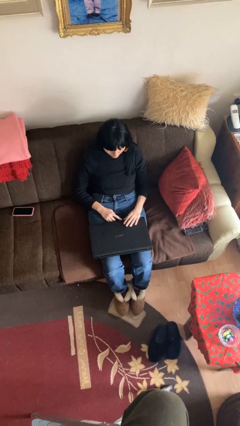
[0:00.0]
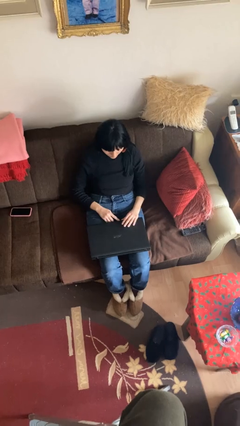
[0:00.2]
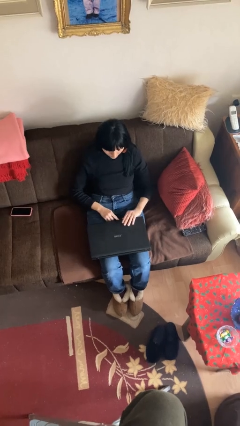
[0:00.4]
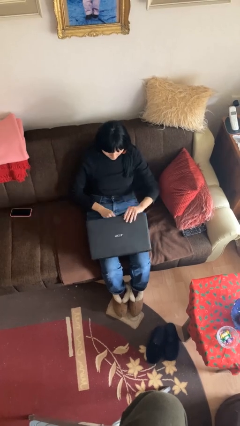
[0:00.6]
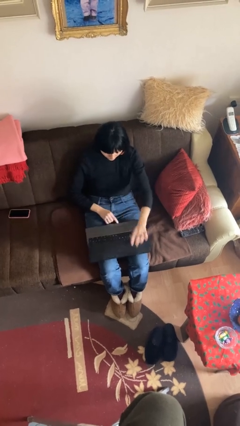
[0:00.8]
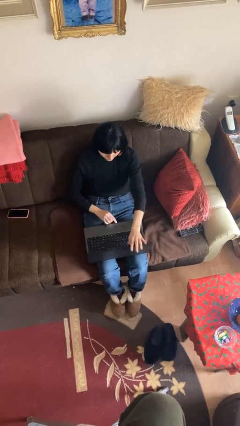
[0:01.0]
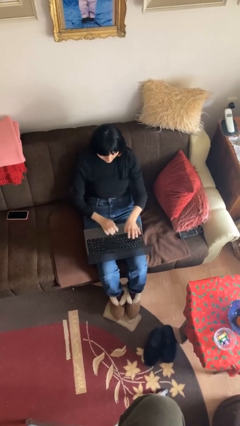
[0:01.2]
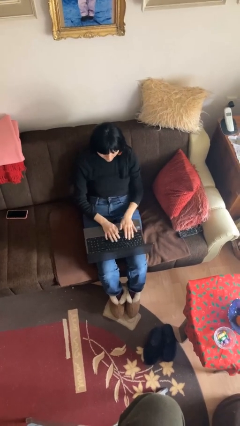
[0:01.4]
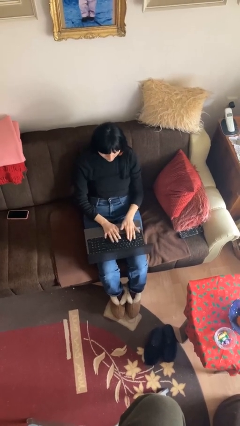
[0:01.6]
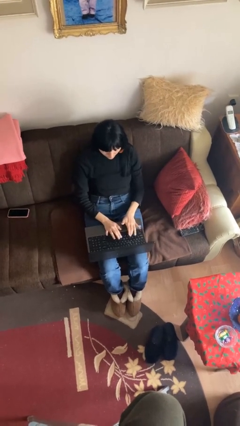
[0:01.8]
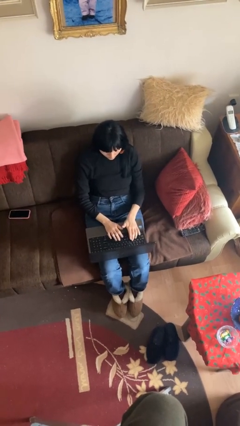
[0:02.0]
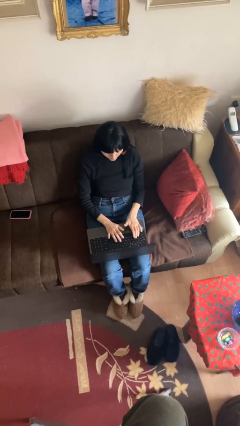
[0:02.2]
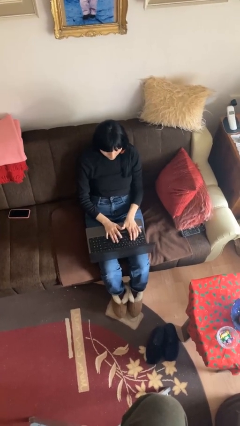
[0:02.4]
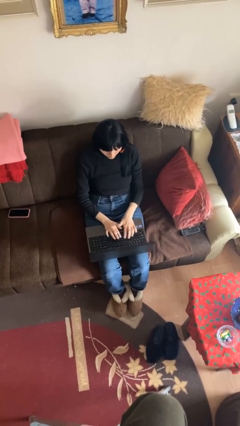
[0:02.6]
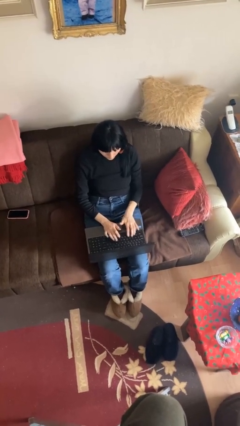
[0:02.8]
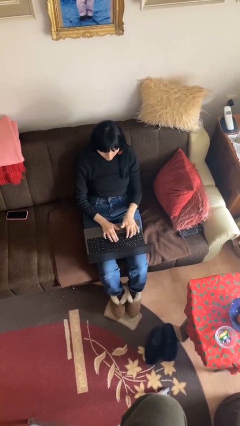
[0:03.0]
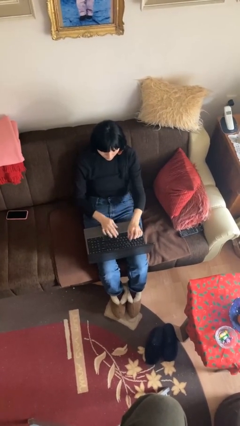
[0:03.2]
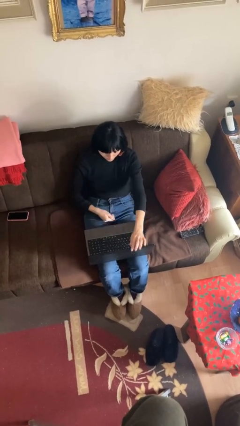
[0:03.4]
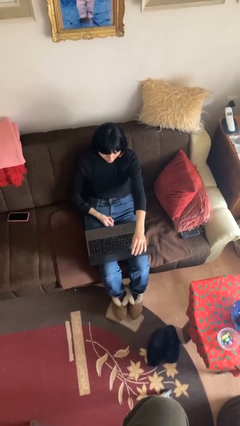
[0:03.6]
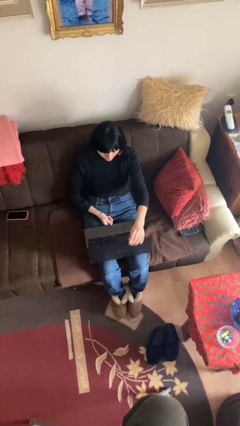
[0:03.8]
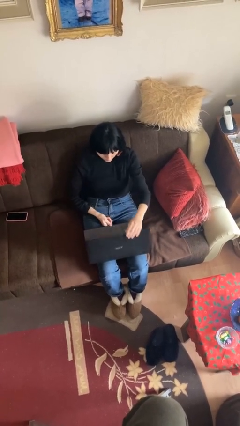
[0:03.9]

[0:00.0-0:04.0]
person interacts with laptop

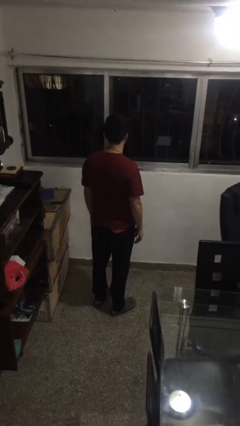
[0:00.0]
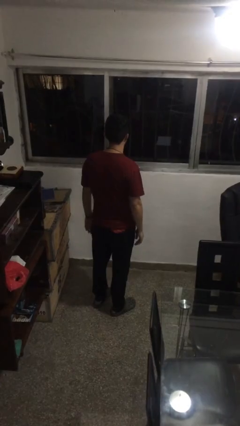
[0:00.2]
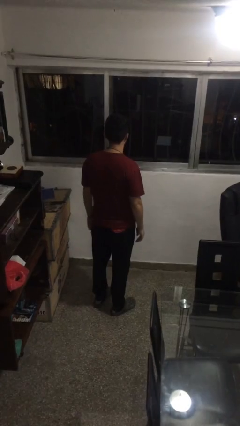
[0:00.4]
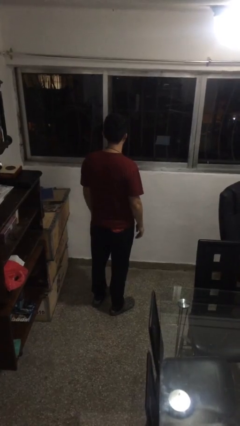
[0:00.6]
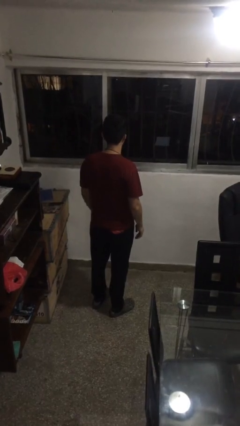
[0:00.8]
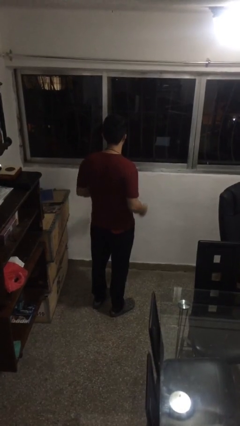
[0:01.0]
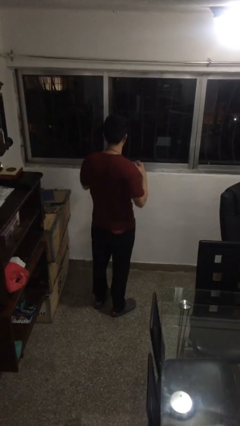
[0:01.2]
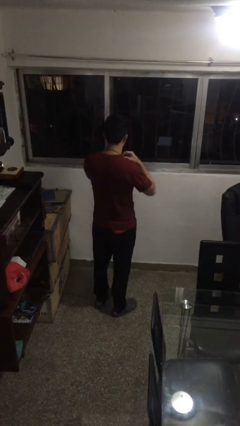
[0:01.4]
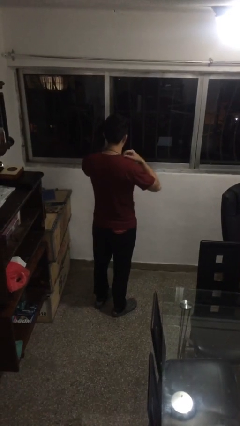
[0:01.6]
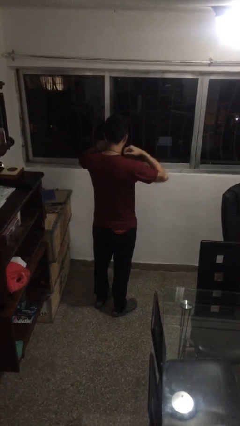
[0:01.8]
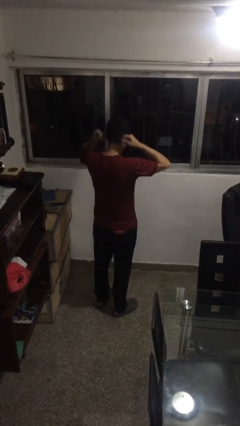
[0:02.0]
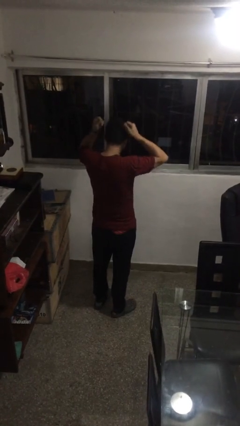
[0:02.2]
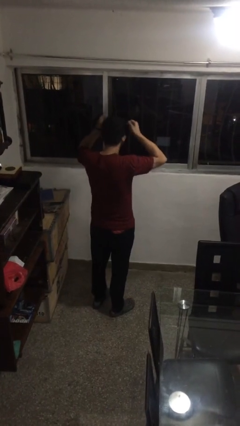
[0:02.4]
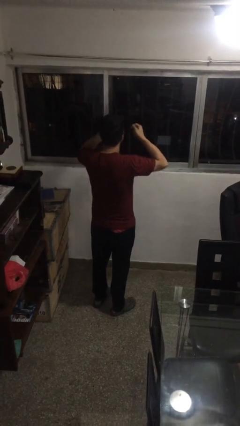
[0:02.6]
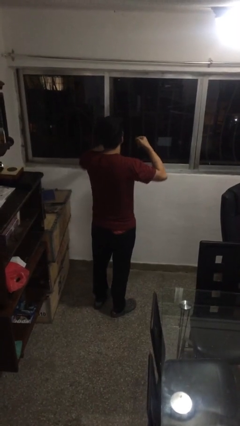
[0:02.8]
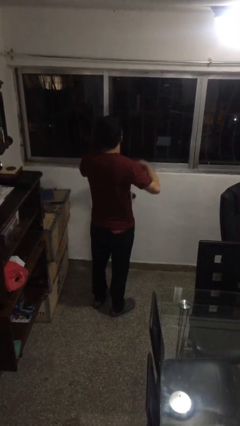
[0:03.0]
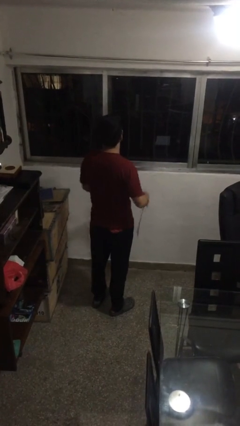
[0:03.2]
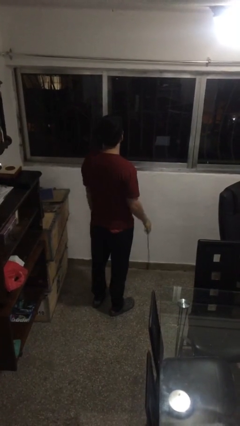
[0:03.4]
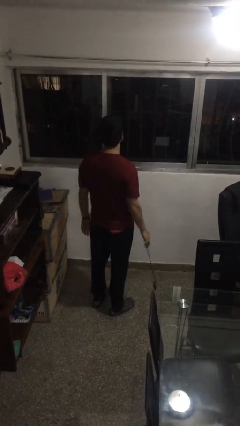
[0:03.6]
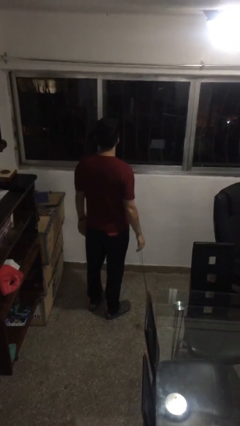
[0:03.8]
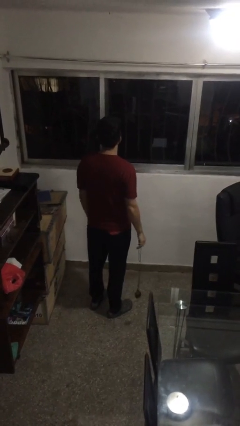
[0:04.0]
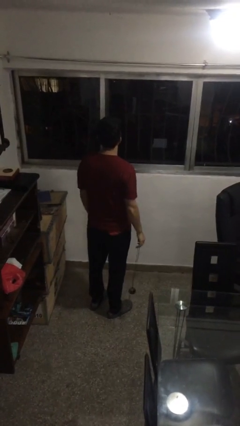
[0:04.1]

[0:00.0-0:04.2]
person takes off necklace

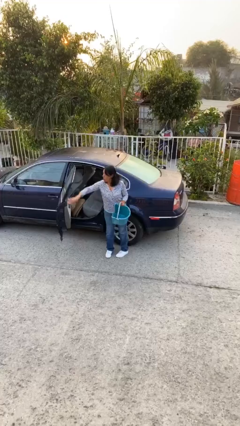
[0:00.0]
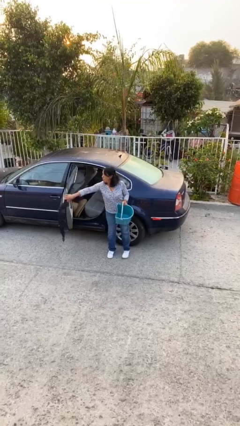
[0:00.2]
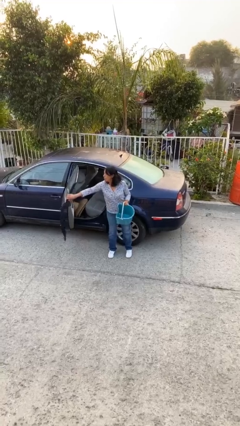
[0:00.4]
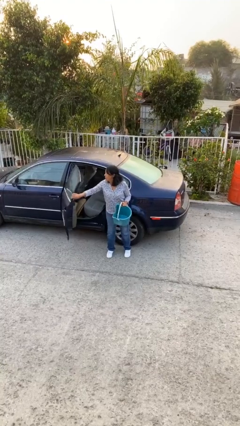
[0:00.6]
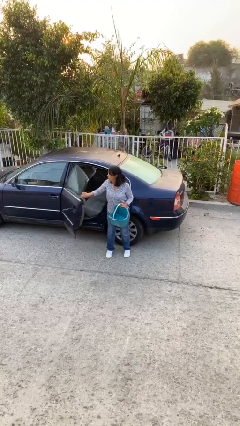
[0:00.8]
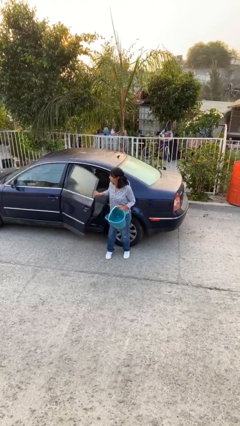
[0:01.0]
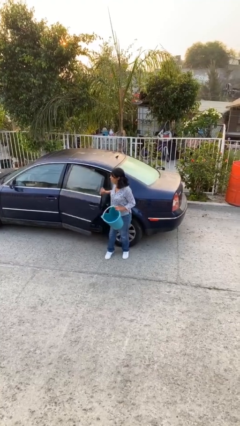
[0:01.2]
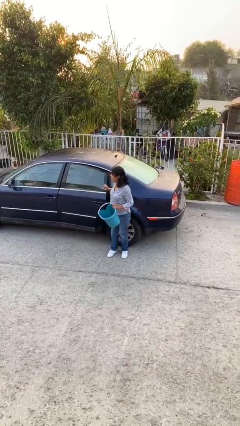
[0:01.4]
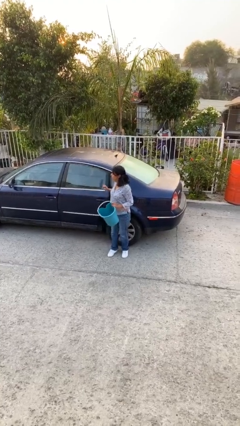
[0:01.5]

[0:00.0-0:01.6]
person closes car door

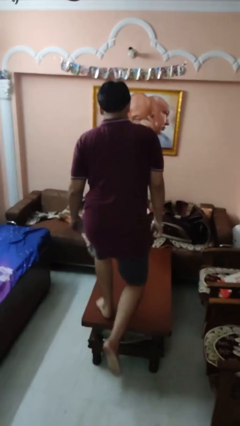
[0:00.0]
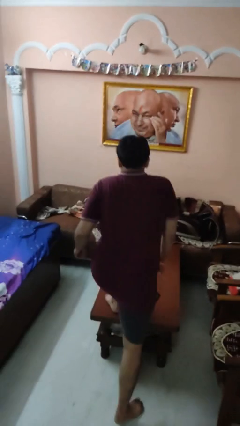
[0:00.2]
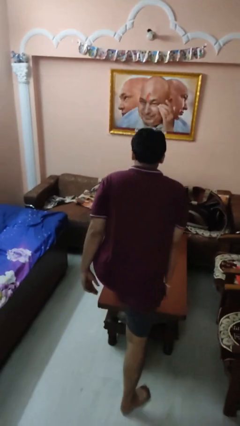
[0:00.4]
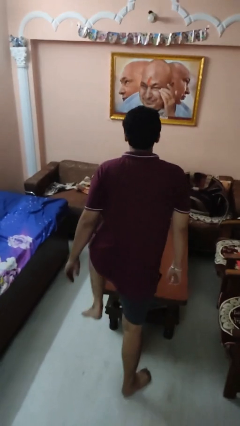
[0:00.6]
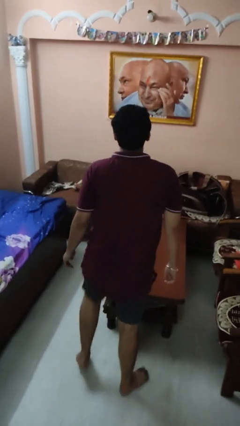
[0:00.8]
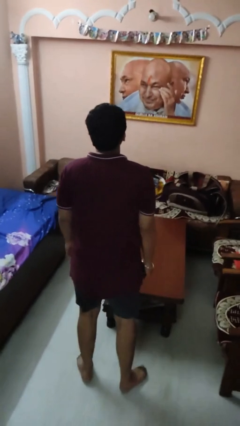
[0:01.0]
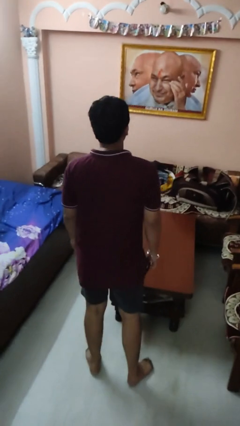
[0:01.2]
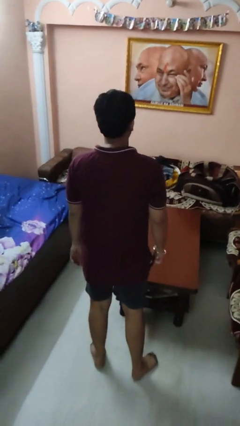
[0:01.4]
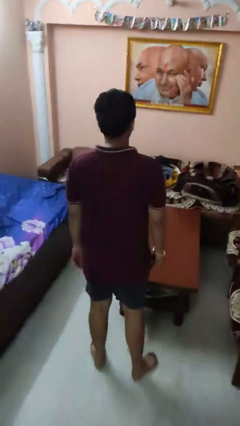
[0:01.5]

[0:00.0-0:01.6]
person climbs off table

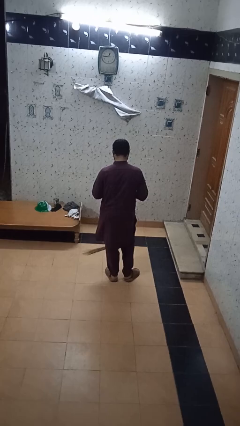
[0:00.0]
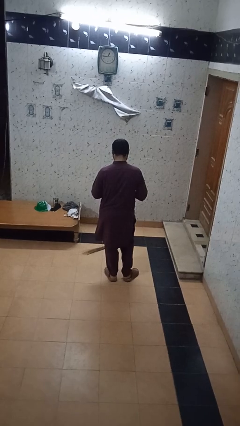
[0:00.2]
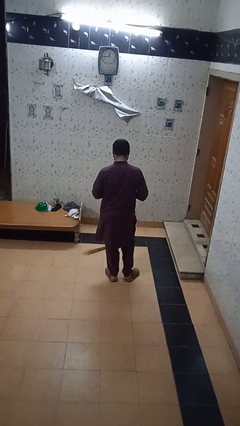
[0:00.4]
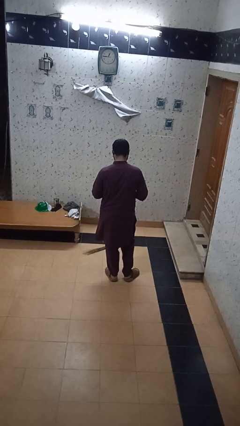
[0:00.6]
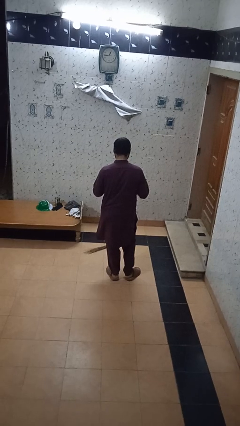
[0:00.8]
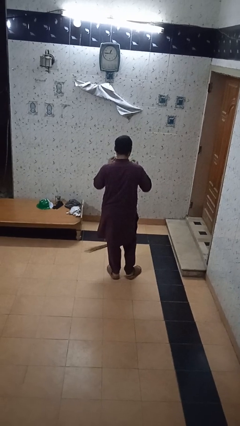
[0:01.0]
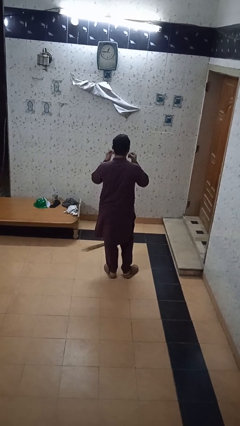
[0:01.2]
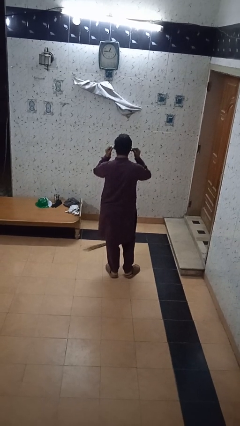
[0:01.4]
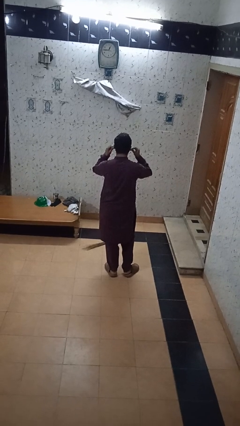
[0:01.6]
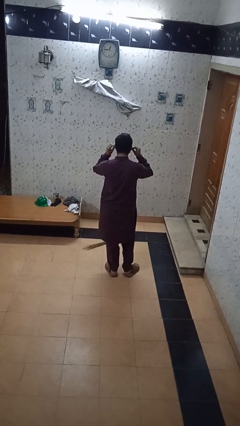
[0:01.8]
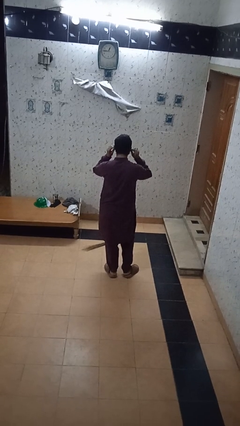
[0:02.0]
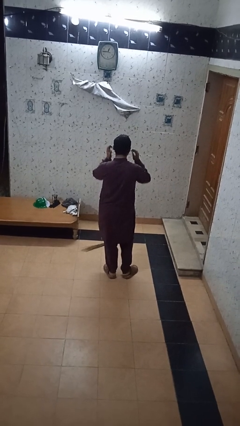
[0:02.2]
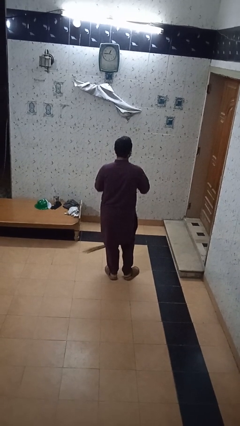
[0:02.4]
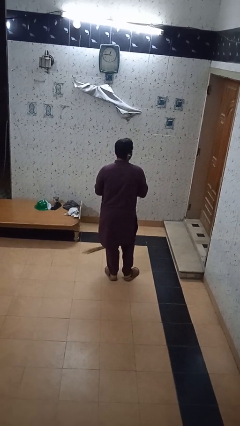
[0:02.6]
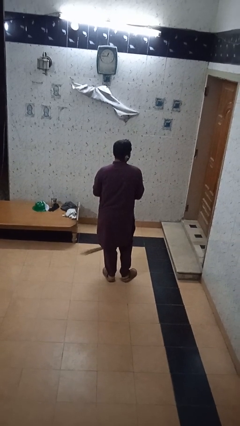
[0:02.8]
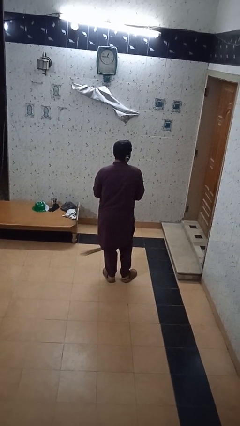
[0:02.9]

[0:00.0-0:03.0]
person puts on headphones

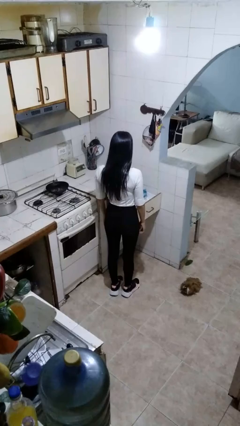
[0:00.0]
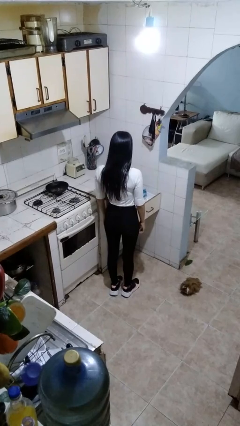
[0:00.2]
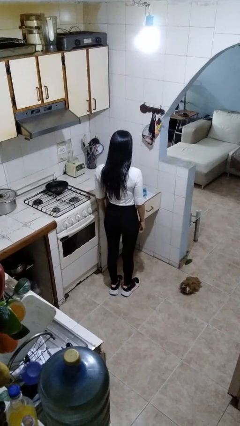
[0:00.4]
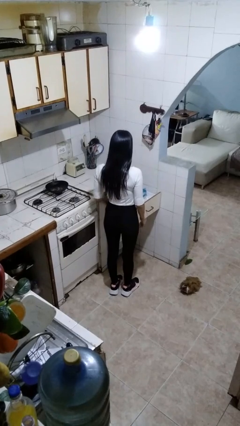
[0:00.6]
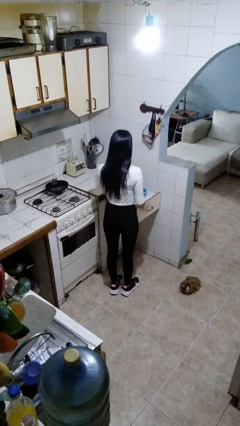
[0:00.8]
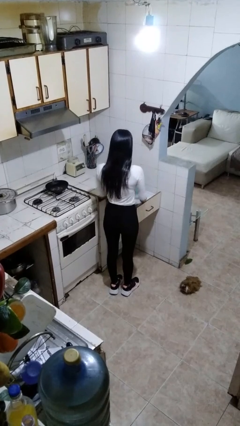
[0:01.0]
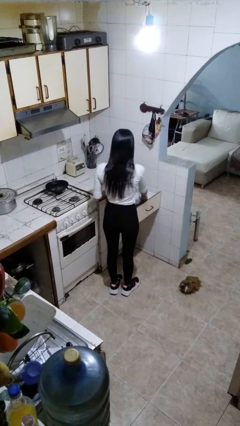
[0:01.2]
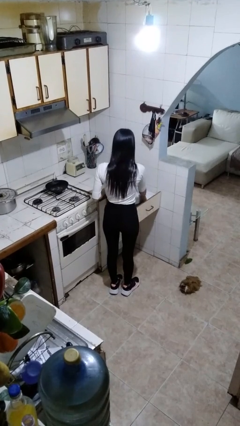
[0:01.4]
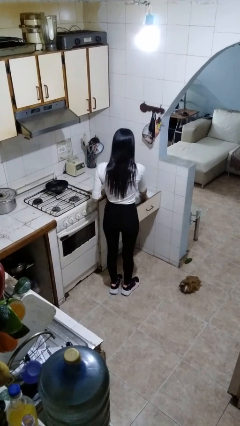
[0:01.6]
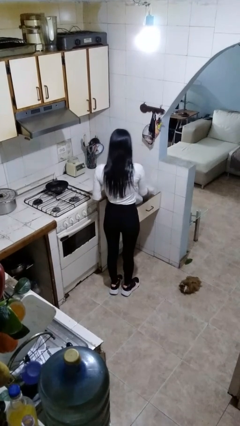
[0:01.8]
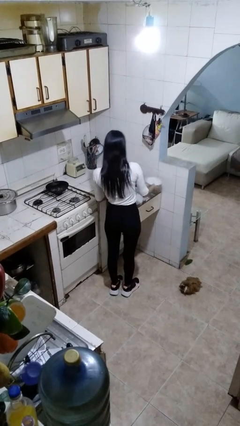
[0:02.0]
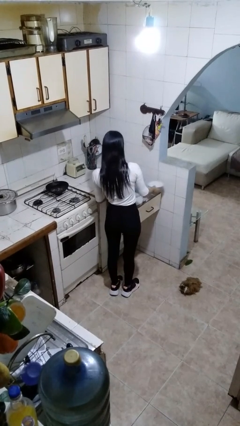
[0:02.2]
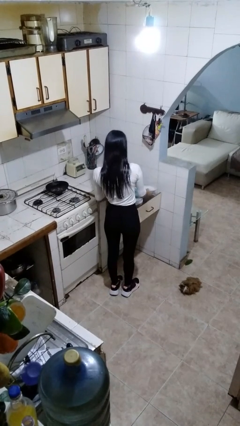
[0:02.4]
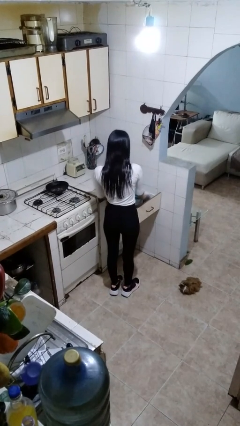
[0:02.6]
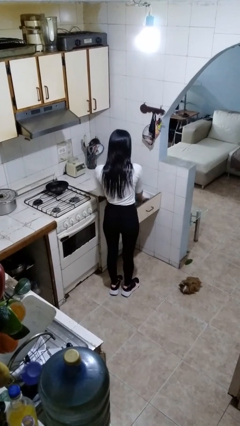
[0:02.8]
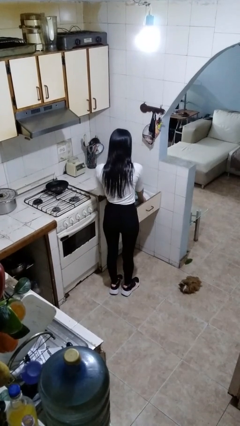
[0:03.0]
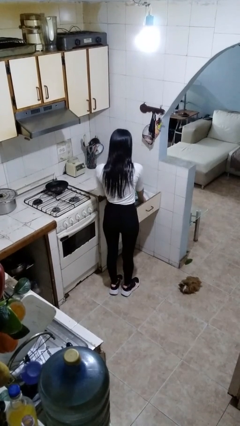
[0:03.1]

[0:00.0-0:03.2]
person searches in kitchen drawer
